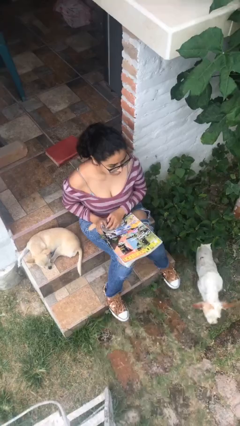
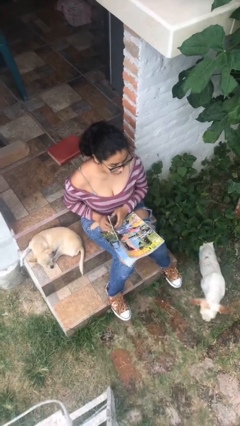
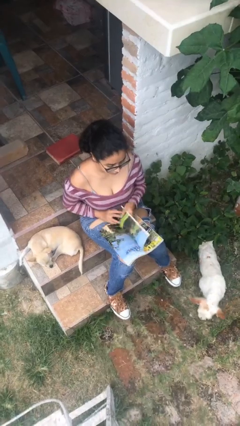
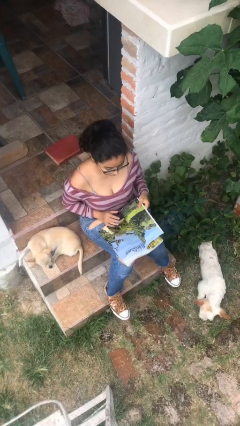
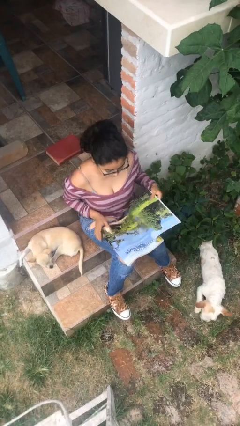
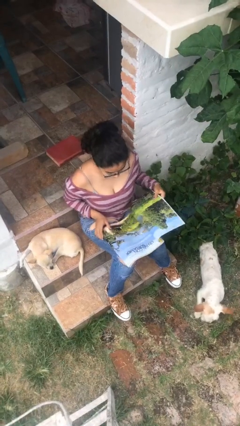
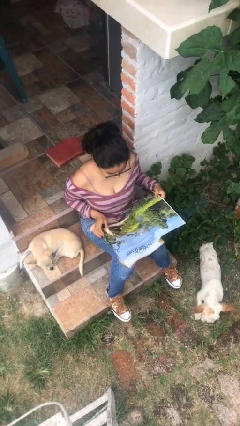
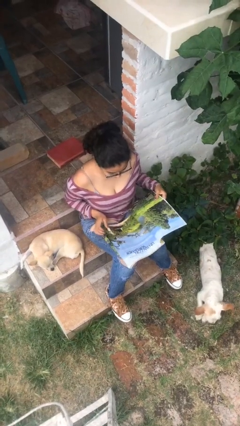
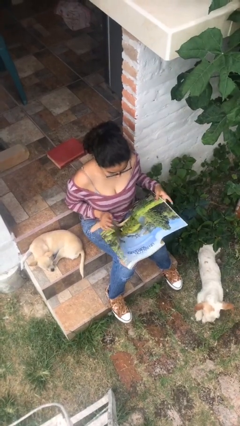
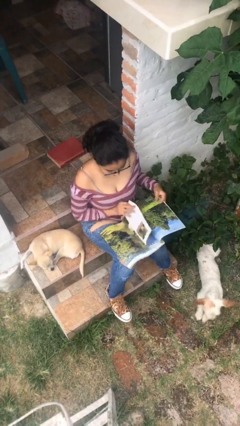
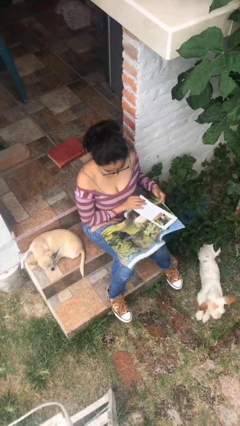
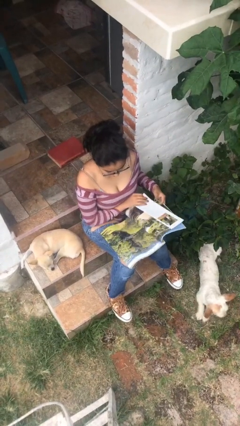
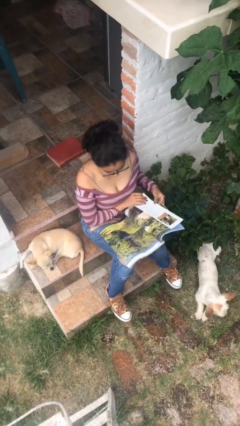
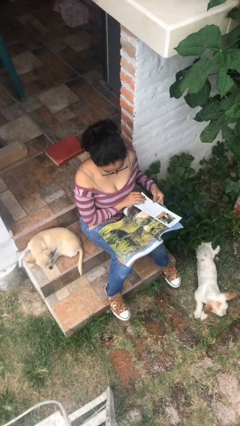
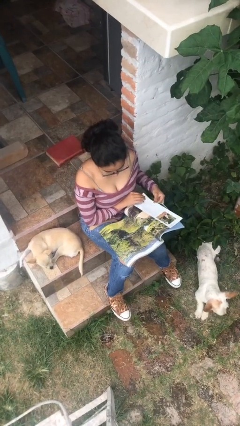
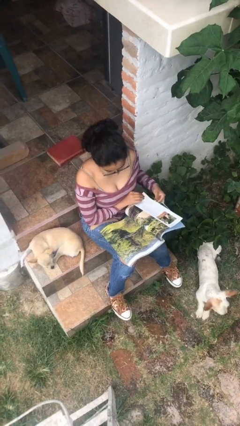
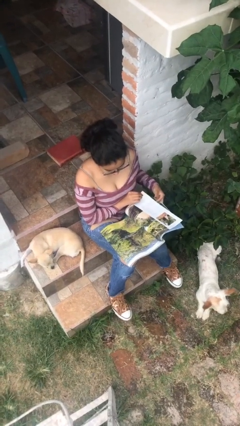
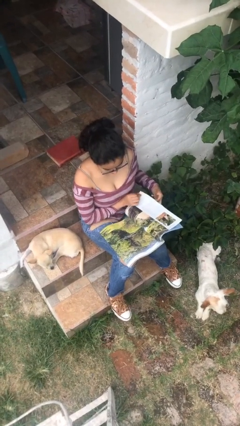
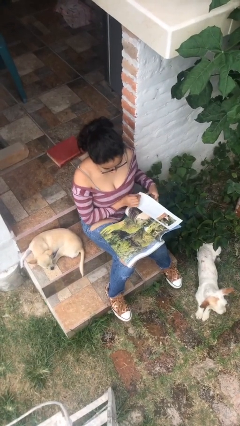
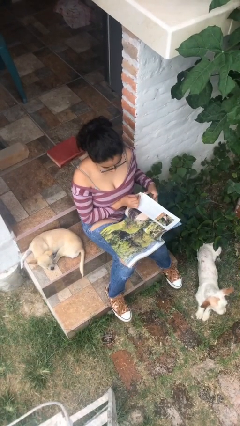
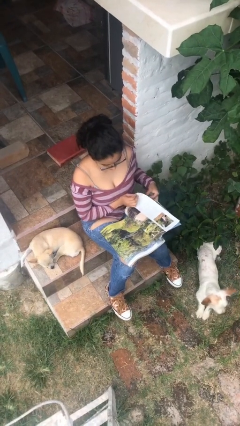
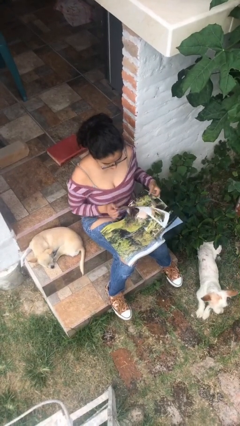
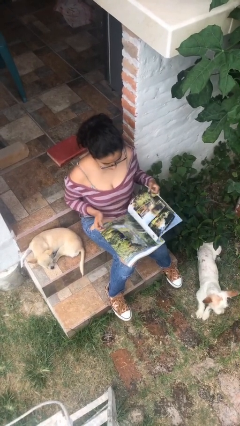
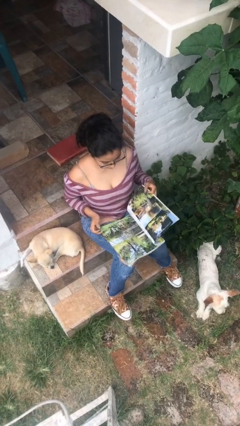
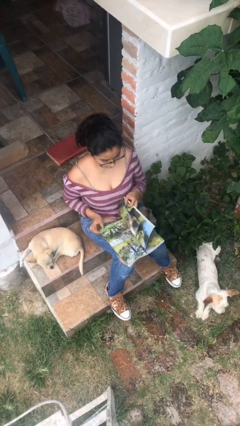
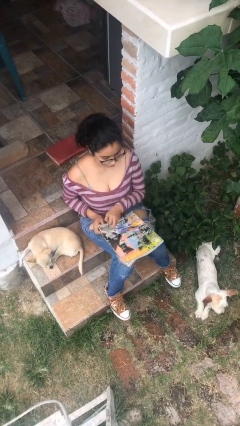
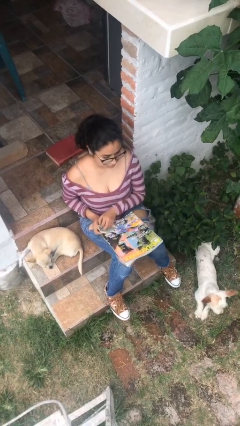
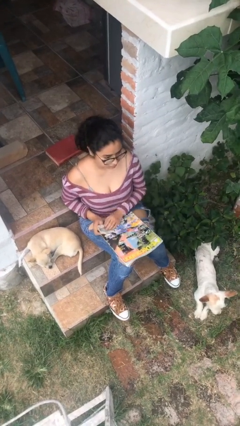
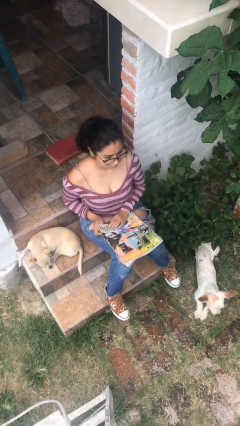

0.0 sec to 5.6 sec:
person reads magazine

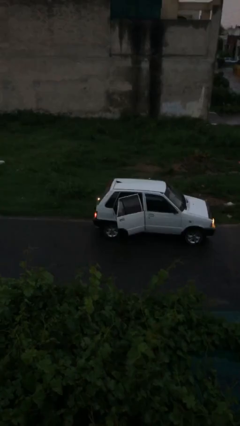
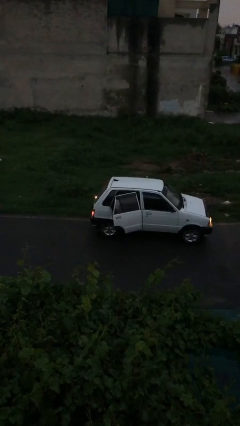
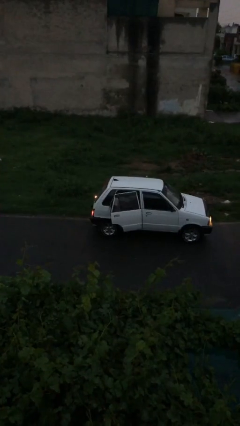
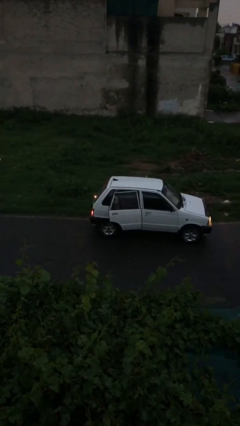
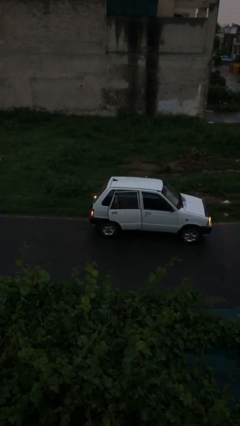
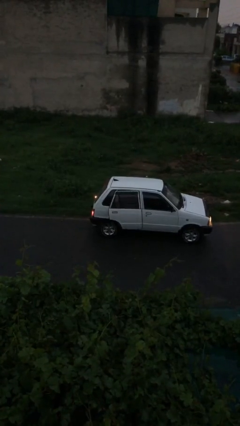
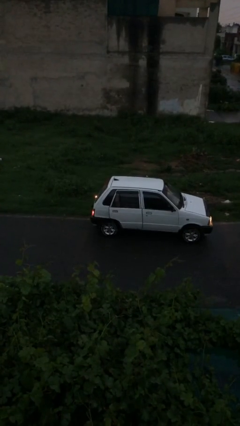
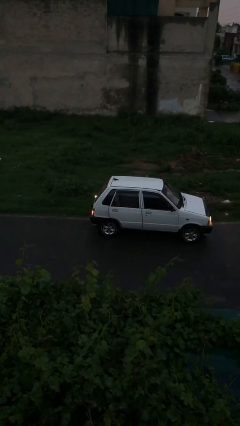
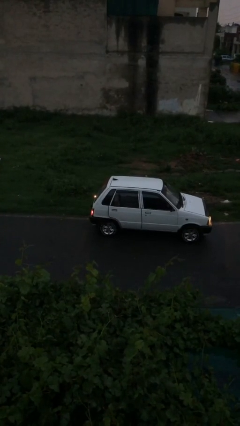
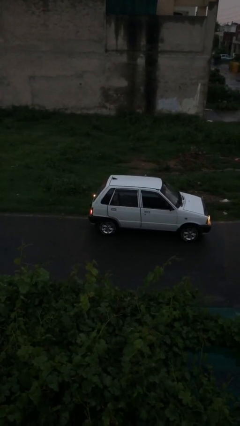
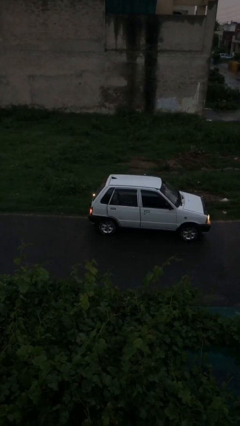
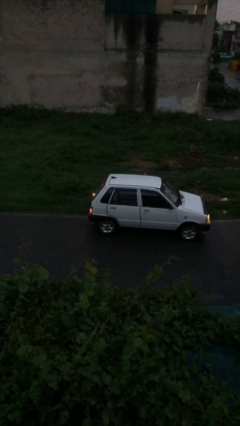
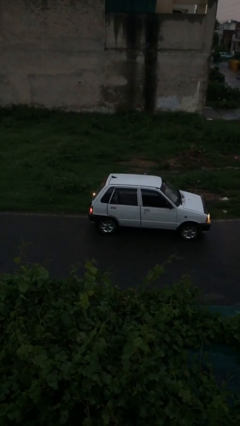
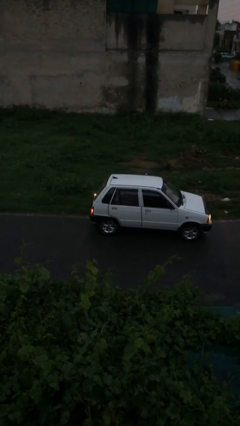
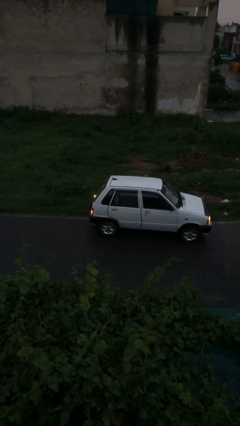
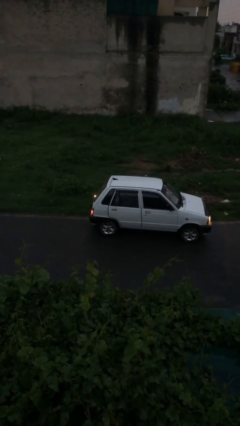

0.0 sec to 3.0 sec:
person closes car door

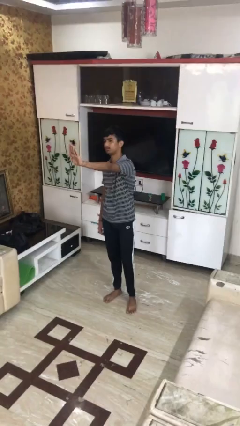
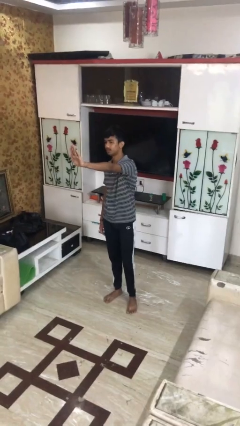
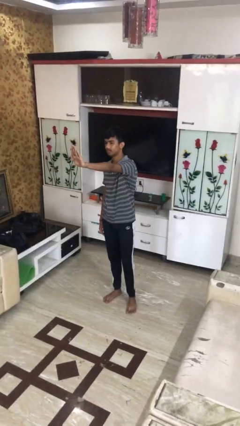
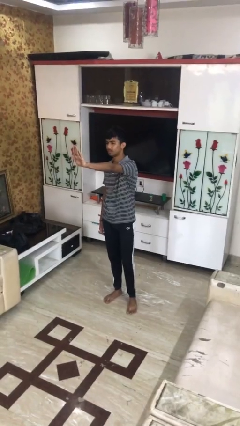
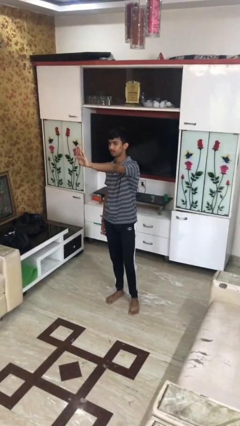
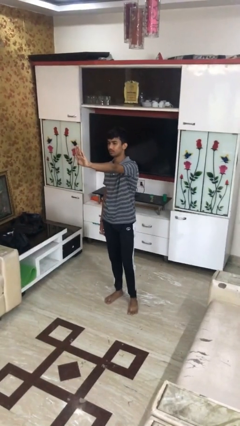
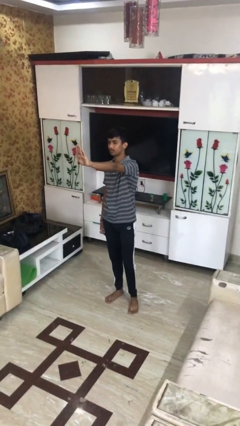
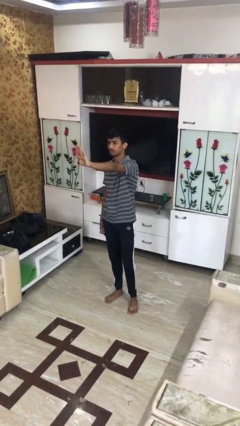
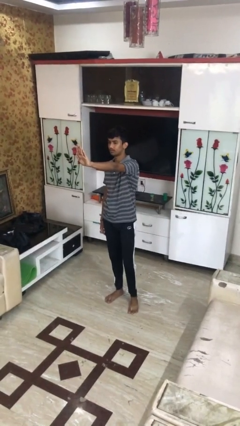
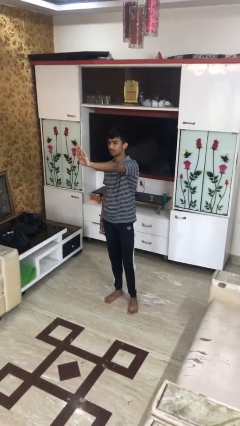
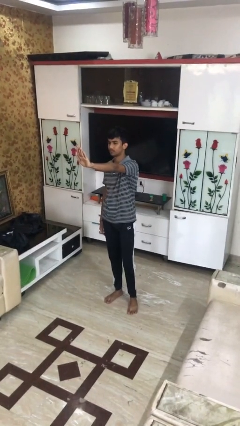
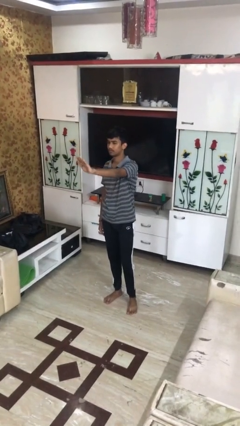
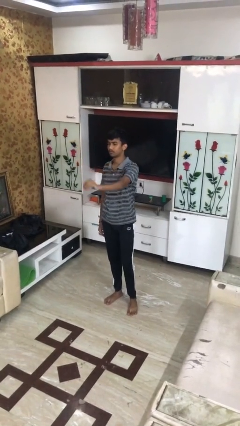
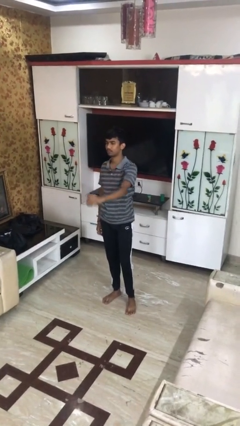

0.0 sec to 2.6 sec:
person gestures stop

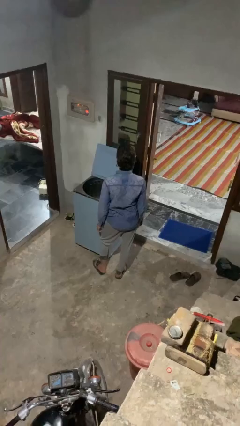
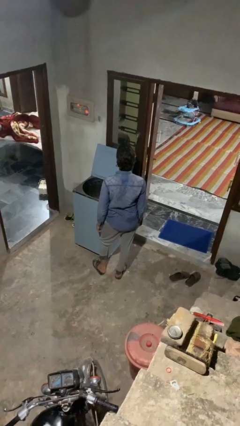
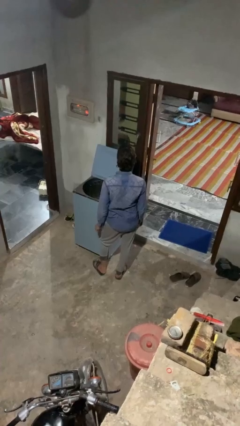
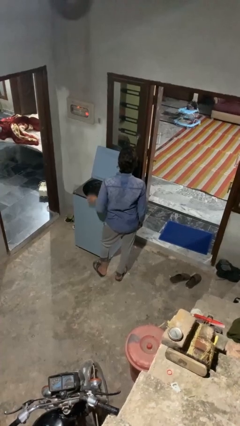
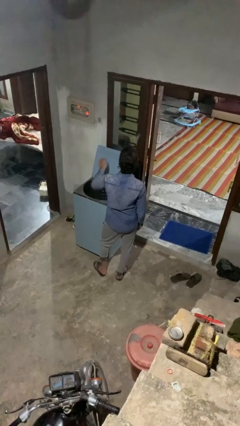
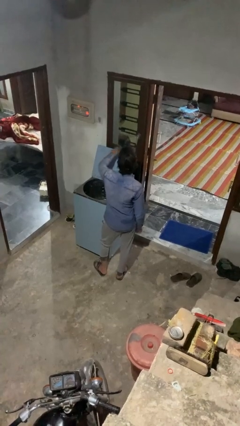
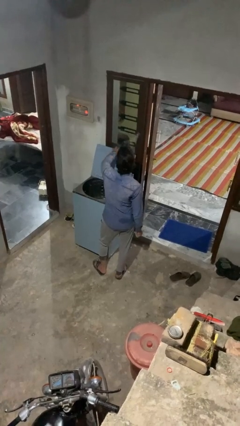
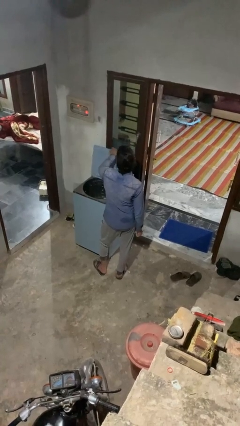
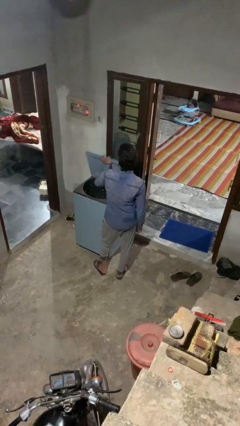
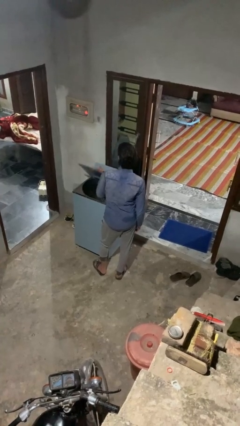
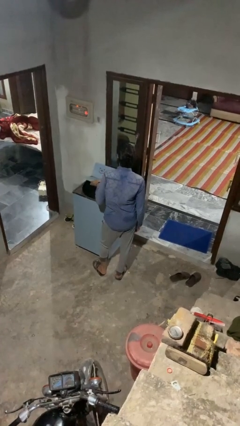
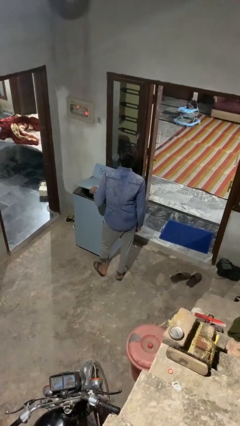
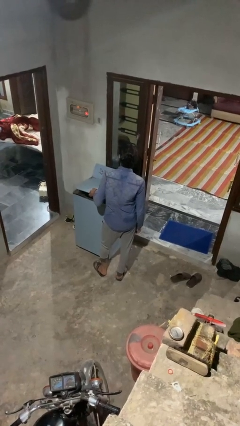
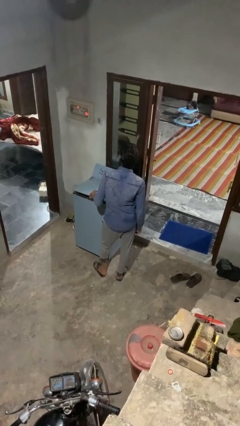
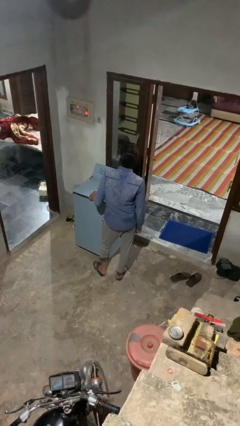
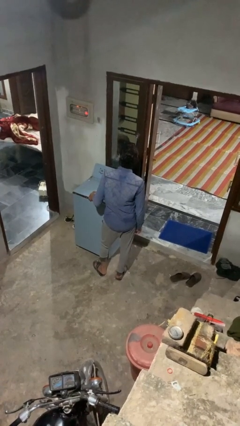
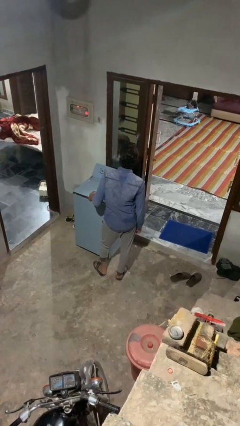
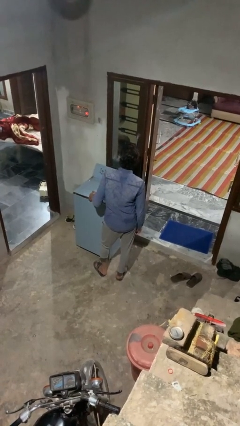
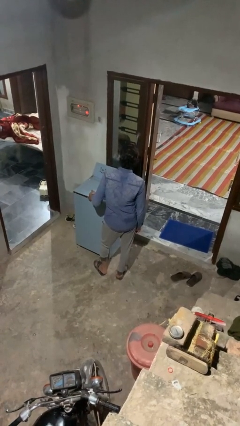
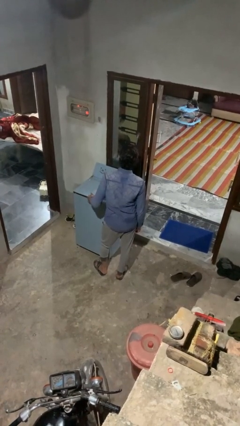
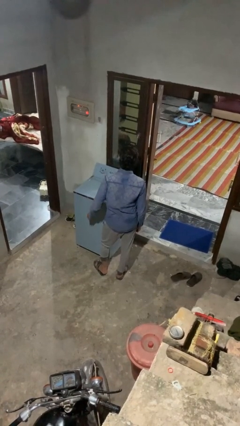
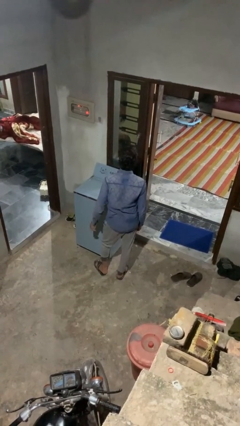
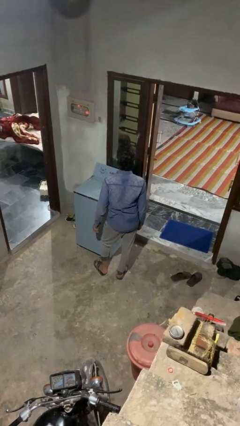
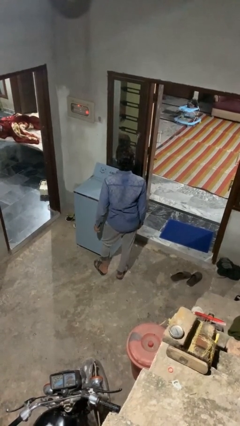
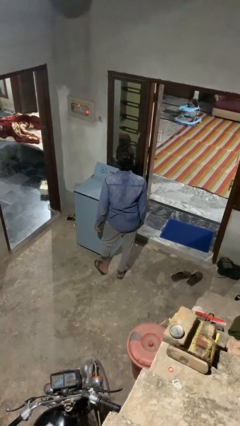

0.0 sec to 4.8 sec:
person closes clothes washer

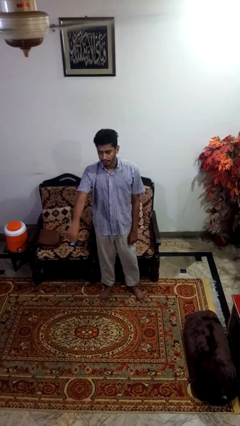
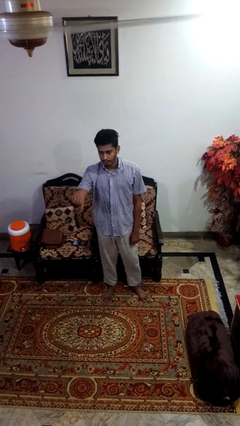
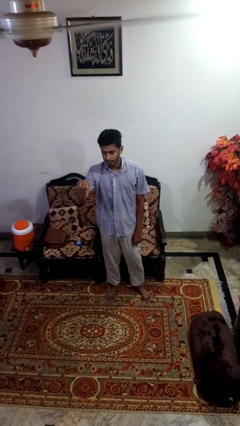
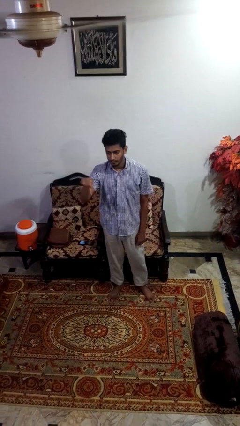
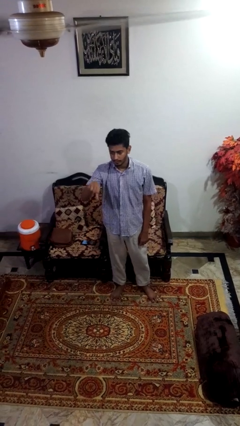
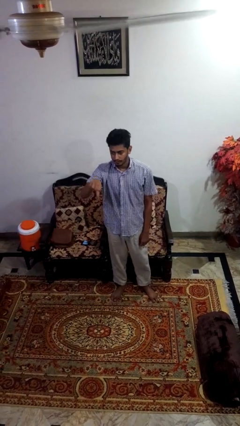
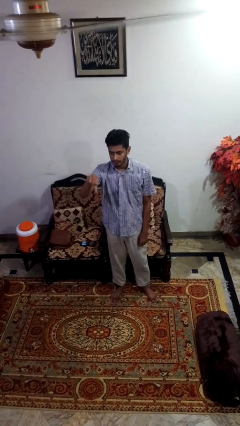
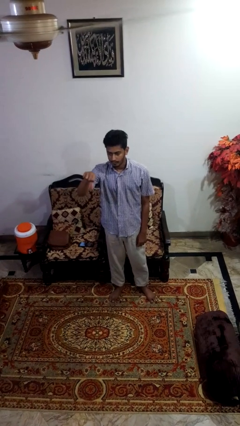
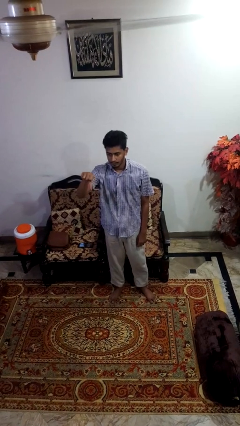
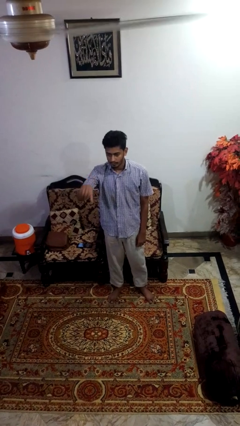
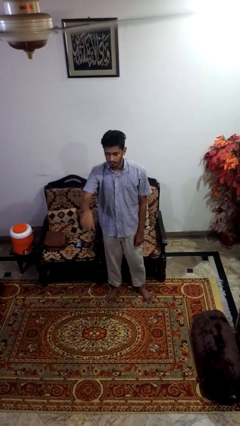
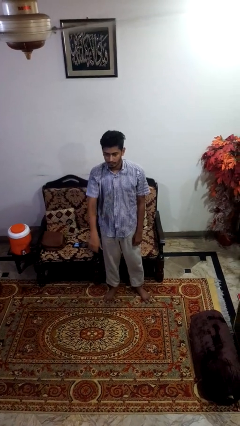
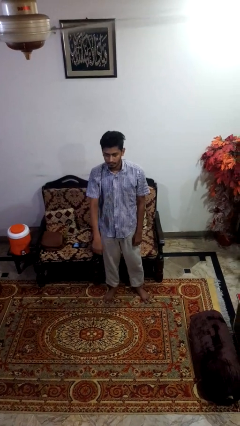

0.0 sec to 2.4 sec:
person gestures thumbs down
